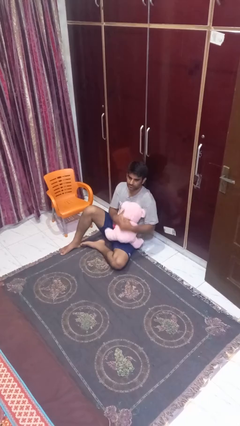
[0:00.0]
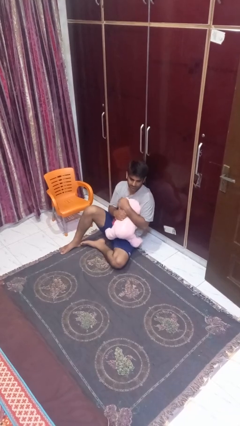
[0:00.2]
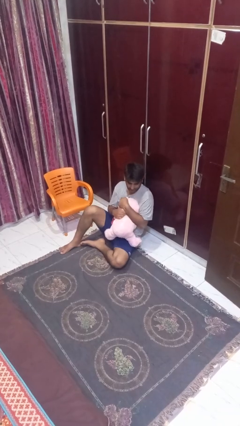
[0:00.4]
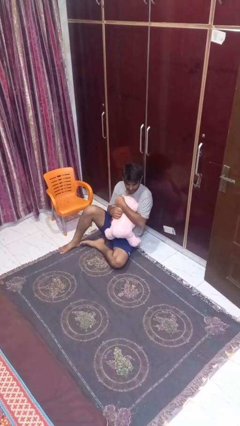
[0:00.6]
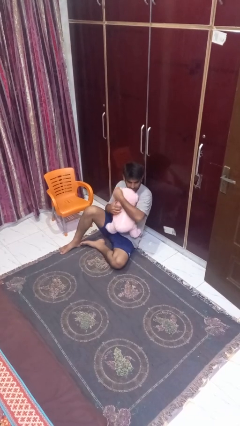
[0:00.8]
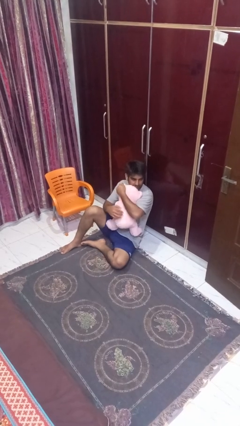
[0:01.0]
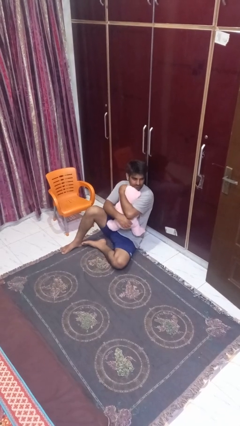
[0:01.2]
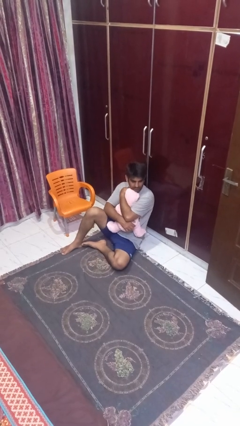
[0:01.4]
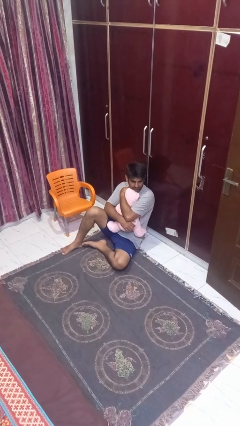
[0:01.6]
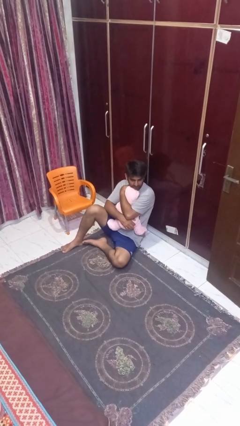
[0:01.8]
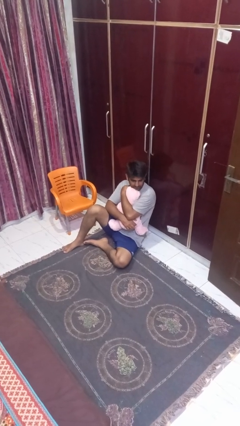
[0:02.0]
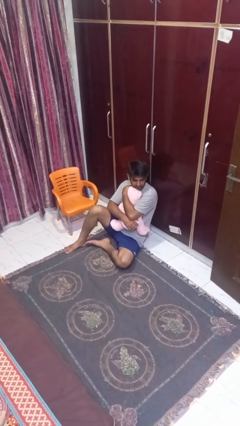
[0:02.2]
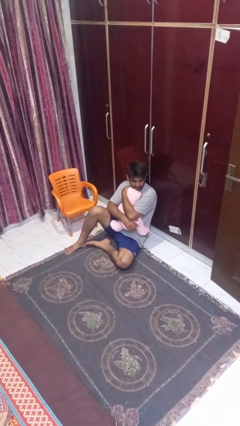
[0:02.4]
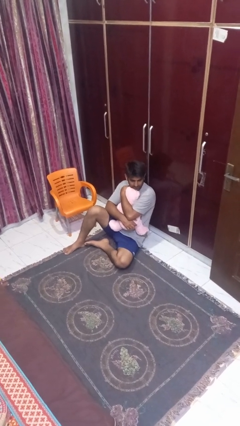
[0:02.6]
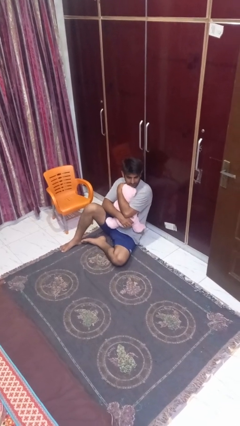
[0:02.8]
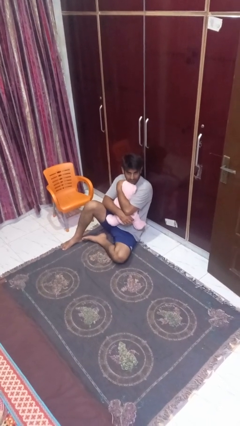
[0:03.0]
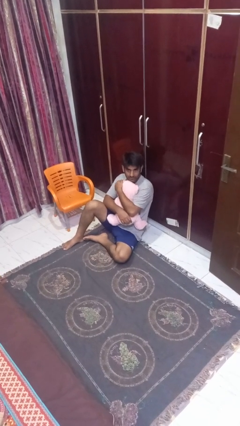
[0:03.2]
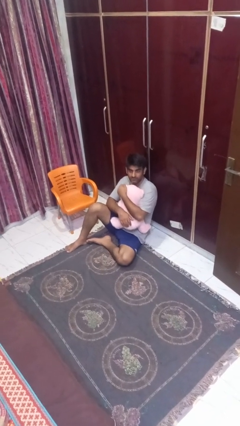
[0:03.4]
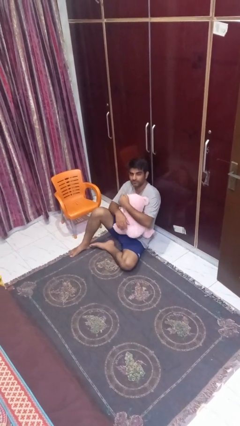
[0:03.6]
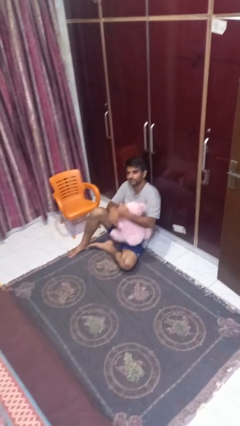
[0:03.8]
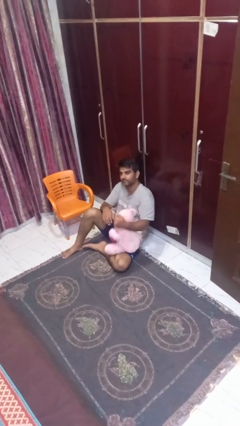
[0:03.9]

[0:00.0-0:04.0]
person hugs stuffed animal

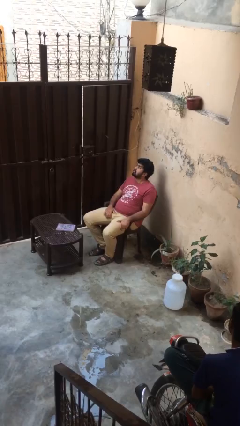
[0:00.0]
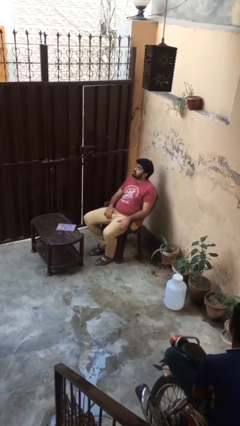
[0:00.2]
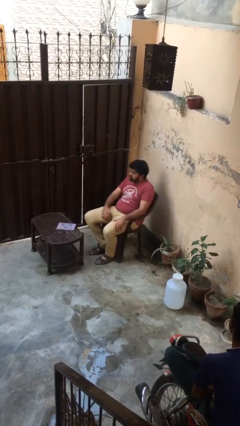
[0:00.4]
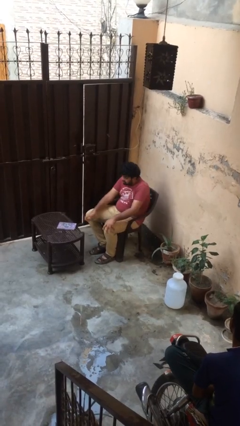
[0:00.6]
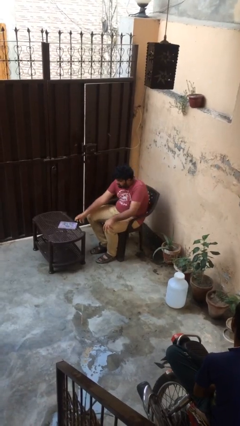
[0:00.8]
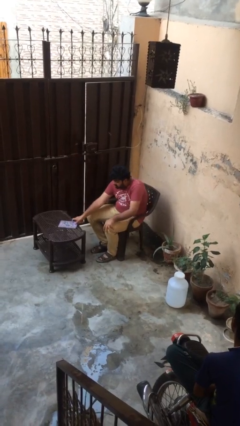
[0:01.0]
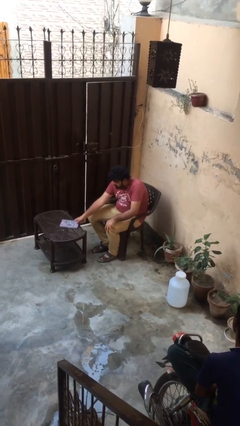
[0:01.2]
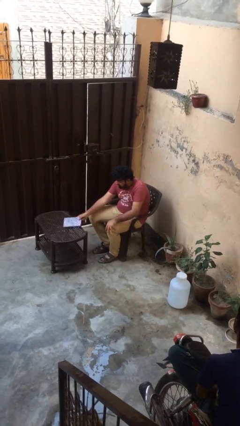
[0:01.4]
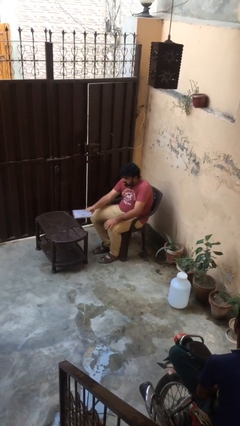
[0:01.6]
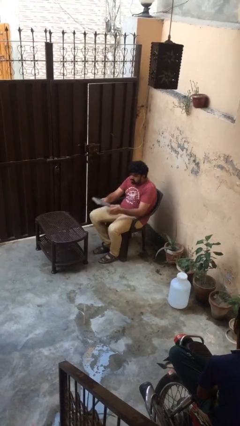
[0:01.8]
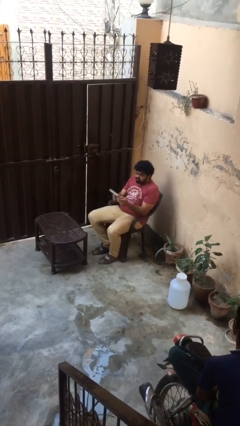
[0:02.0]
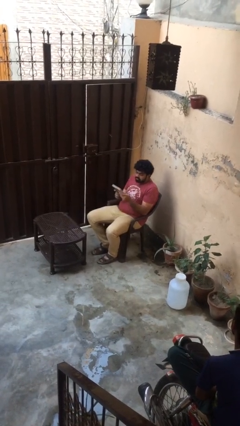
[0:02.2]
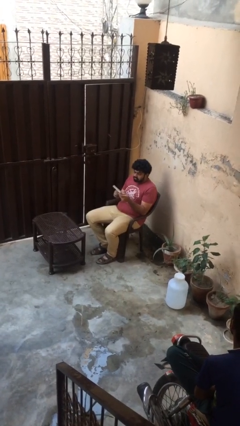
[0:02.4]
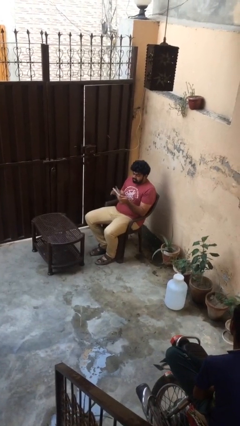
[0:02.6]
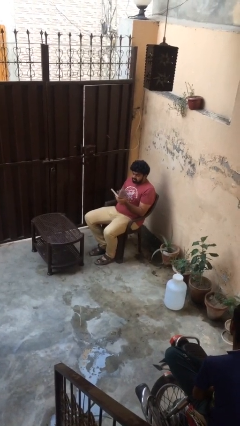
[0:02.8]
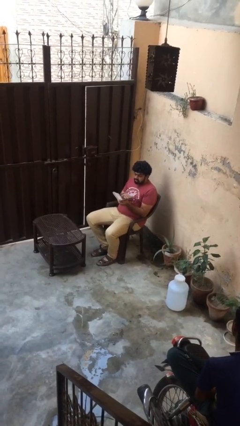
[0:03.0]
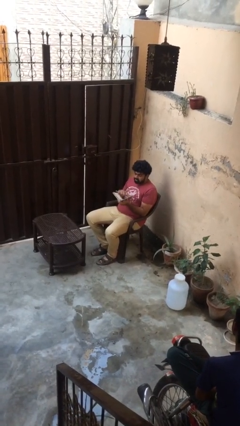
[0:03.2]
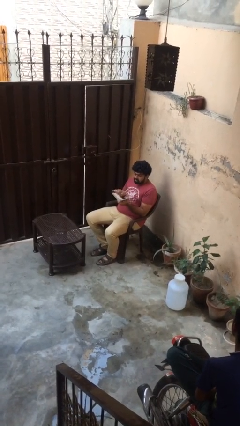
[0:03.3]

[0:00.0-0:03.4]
person picks up object from table

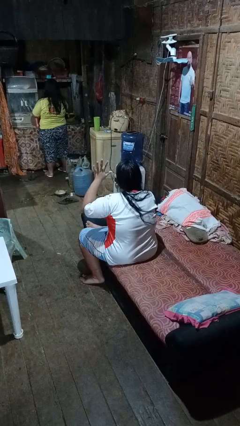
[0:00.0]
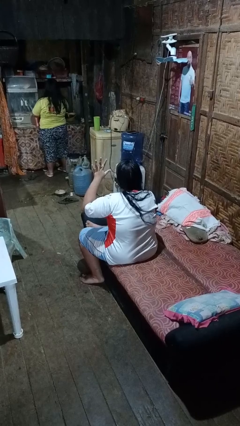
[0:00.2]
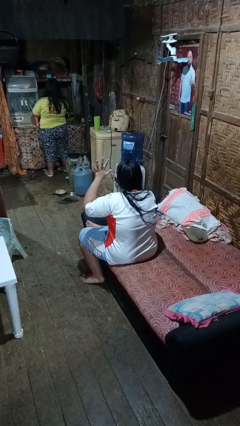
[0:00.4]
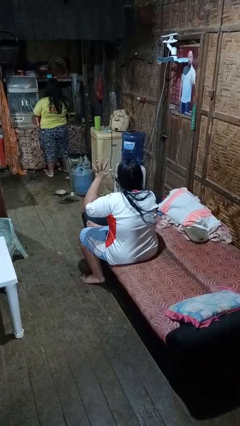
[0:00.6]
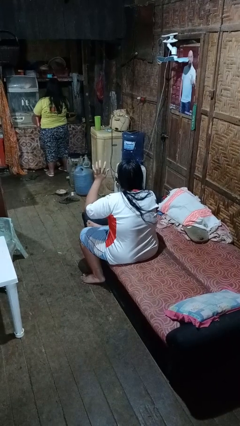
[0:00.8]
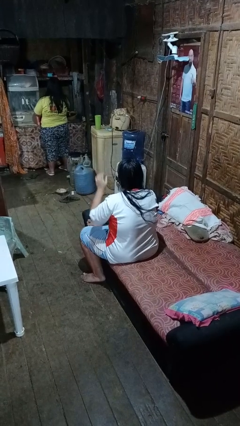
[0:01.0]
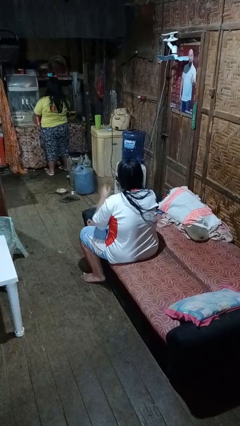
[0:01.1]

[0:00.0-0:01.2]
person gestures number five

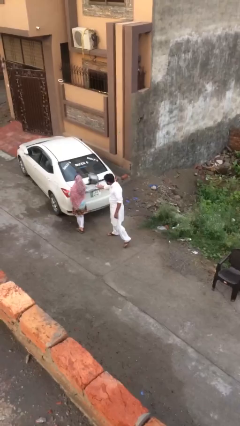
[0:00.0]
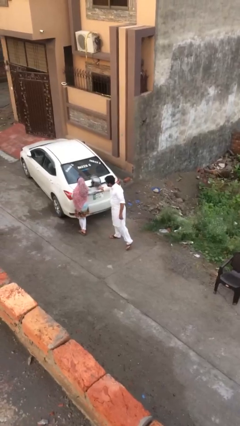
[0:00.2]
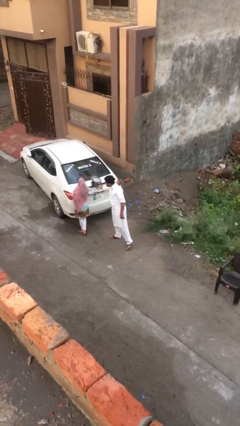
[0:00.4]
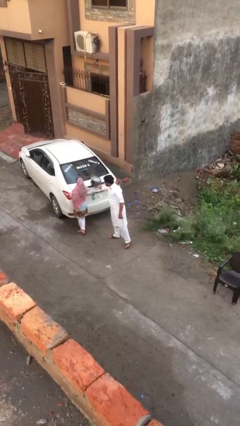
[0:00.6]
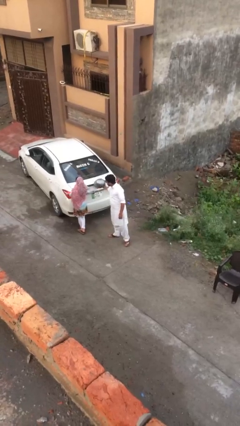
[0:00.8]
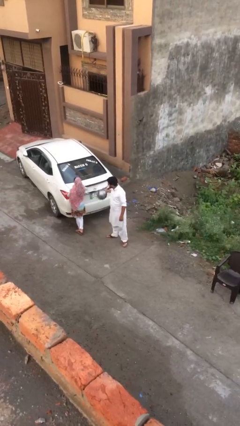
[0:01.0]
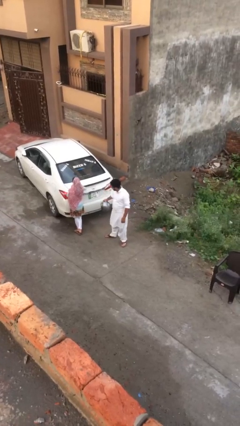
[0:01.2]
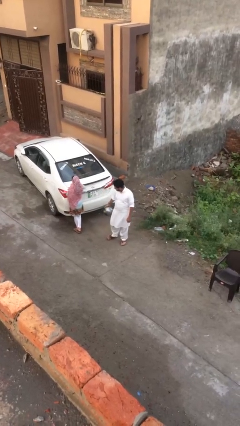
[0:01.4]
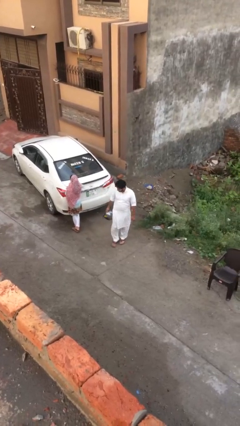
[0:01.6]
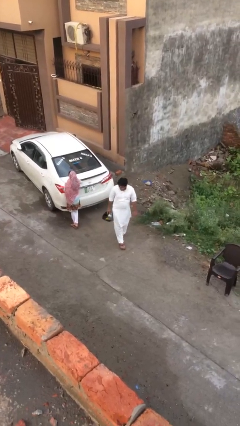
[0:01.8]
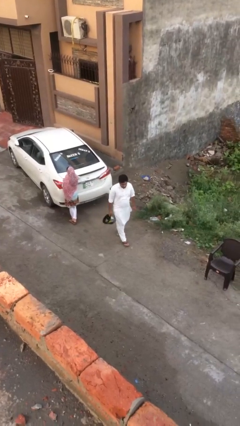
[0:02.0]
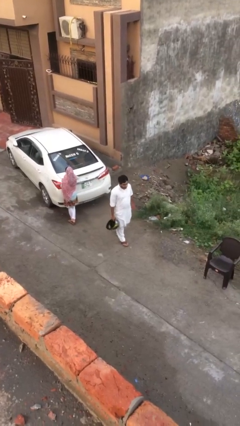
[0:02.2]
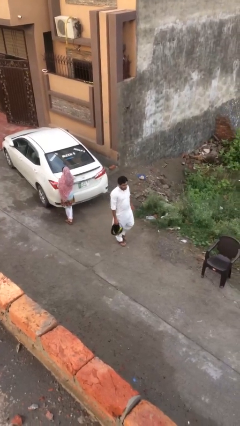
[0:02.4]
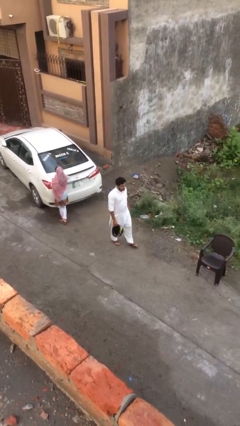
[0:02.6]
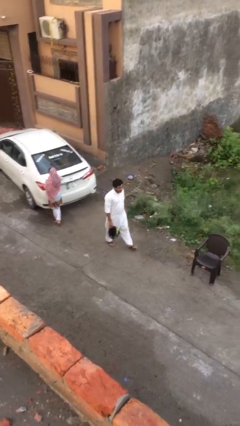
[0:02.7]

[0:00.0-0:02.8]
person steals object from person

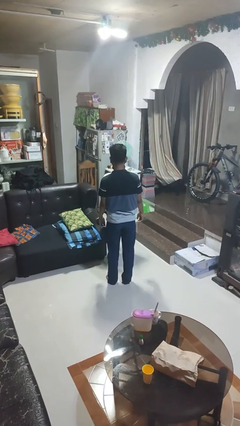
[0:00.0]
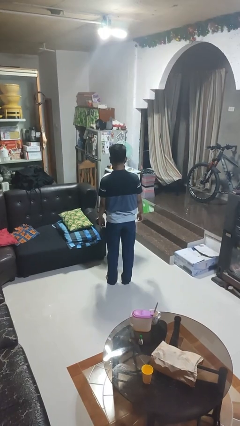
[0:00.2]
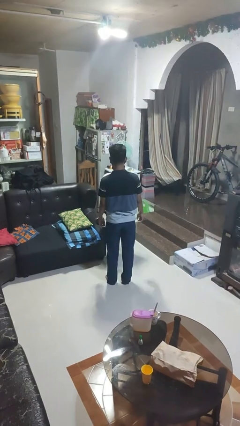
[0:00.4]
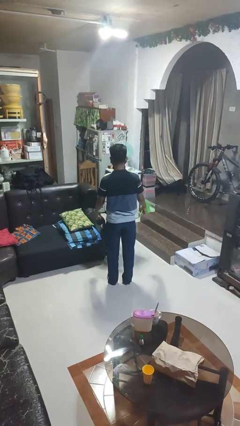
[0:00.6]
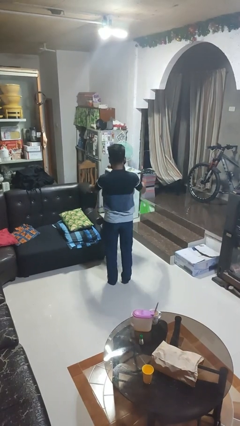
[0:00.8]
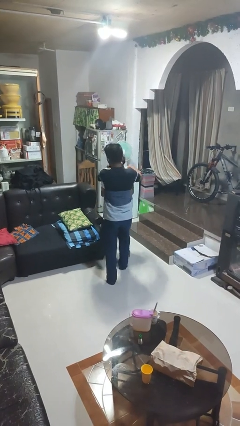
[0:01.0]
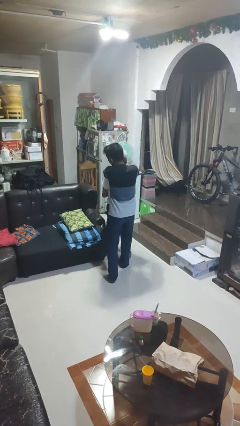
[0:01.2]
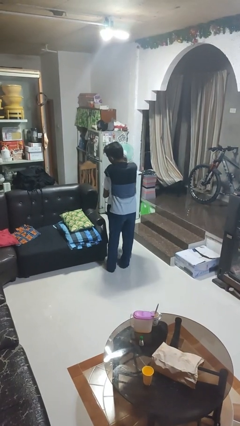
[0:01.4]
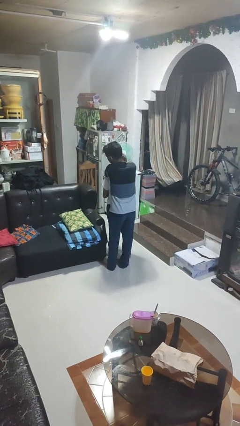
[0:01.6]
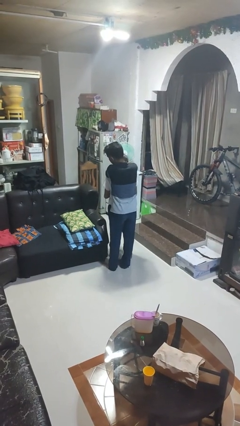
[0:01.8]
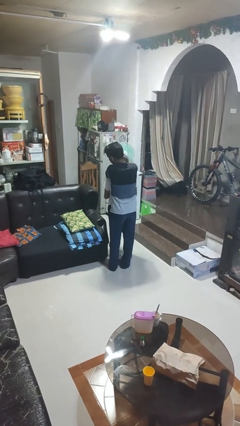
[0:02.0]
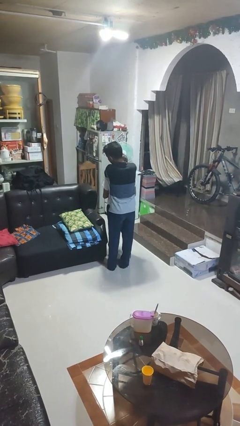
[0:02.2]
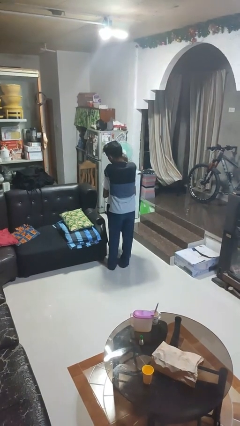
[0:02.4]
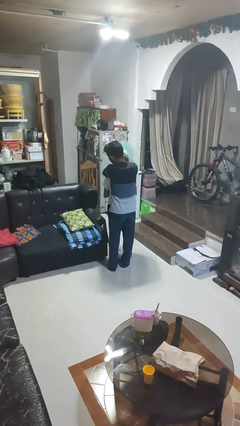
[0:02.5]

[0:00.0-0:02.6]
person hugs person from behind

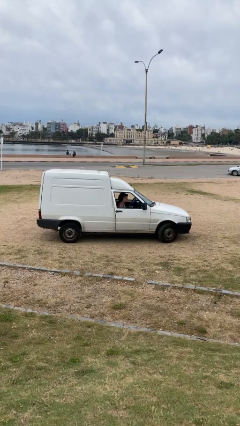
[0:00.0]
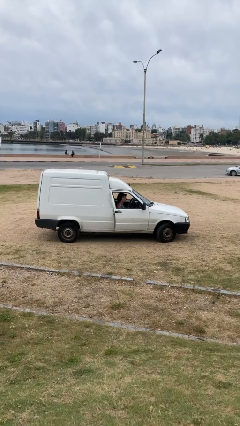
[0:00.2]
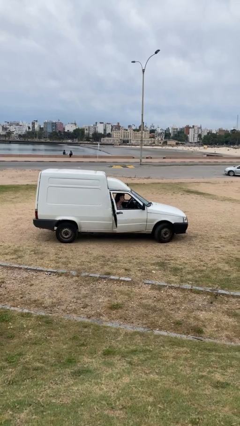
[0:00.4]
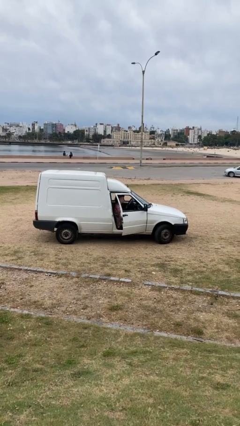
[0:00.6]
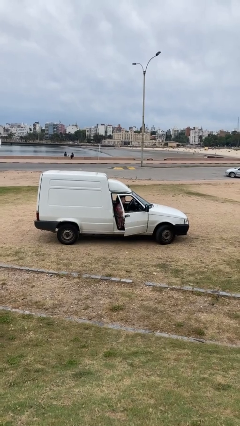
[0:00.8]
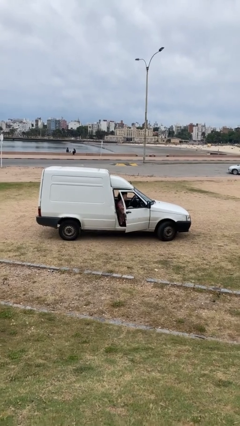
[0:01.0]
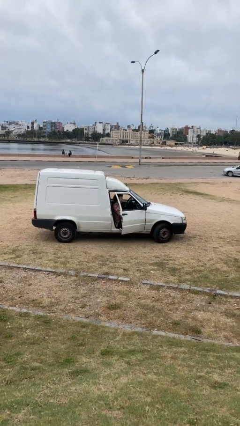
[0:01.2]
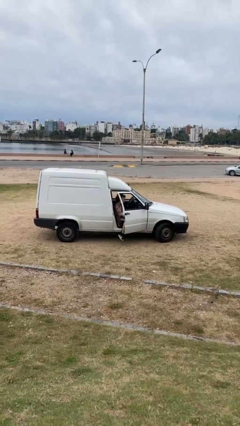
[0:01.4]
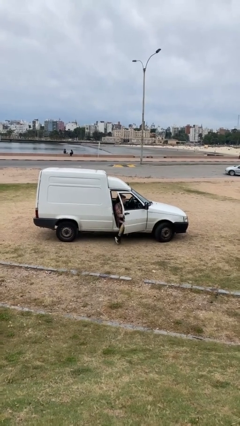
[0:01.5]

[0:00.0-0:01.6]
person opens car door

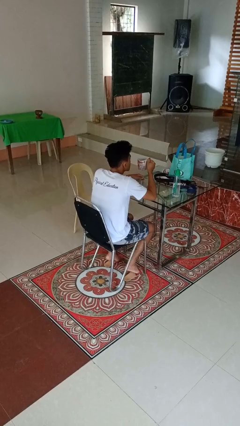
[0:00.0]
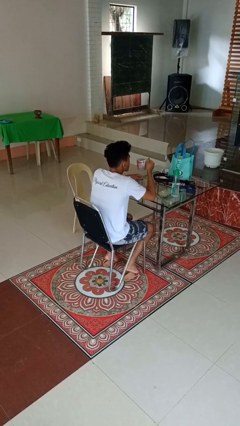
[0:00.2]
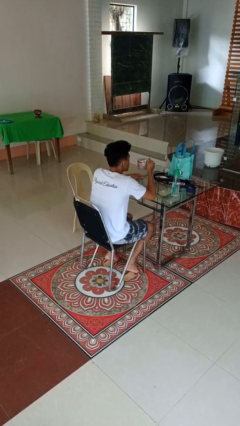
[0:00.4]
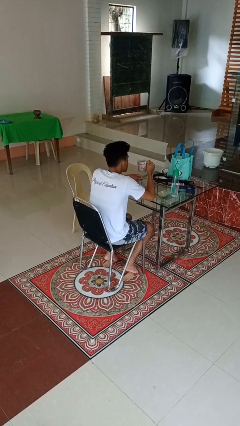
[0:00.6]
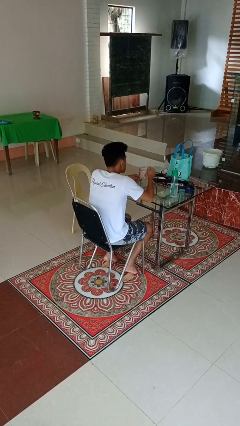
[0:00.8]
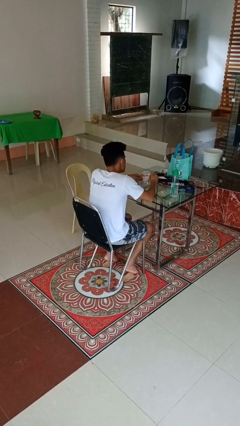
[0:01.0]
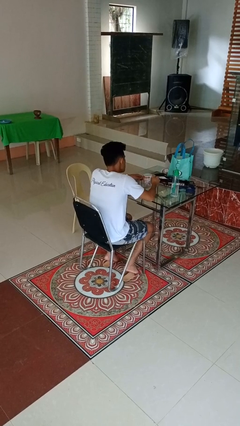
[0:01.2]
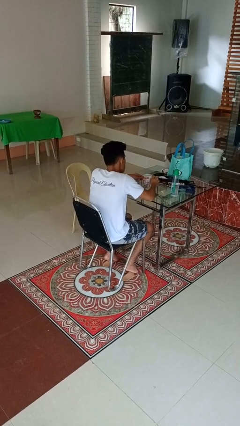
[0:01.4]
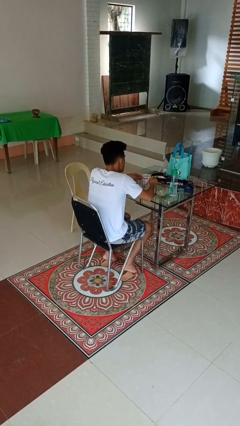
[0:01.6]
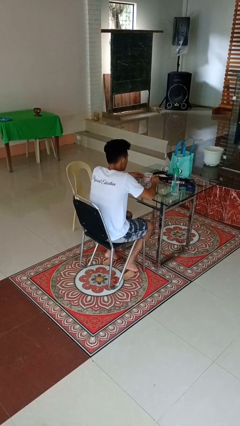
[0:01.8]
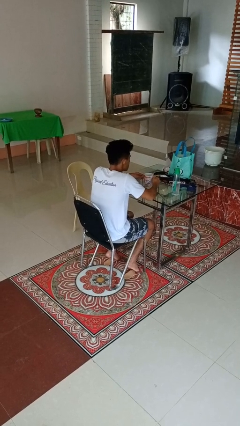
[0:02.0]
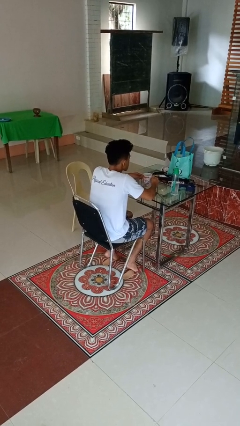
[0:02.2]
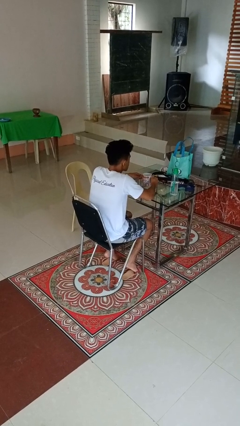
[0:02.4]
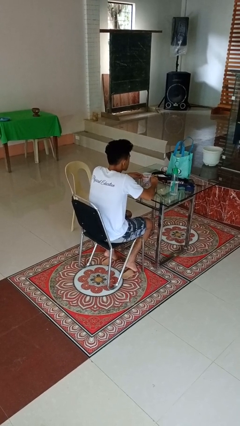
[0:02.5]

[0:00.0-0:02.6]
person puts down object on table
